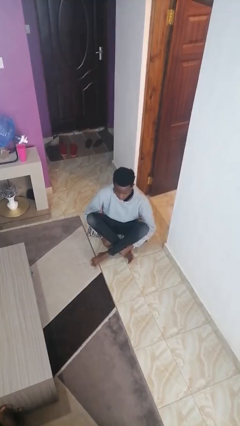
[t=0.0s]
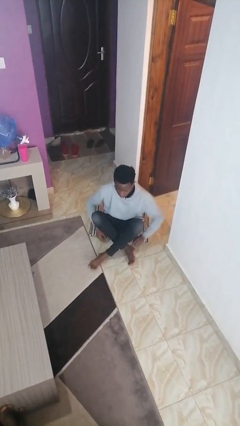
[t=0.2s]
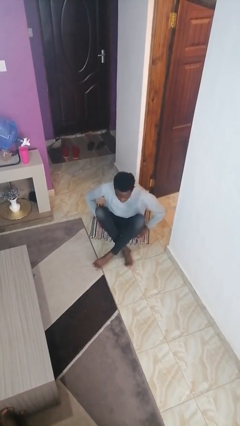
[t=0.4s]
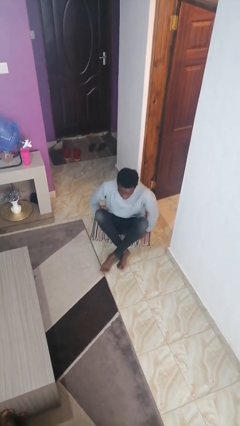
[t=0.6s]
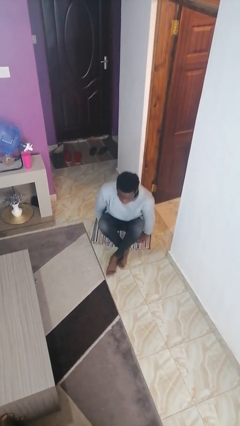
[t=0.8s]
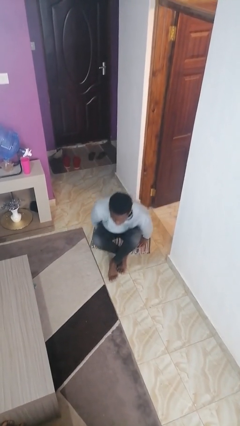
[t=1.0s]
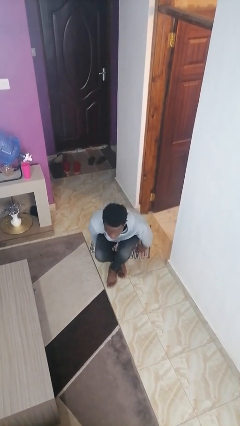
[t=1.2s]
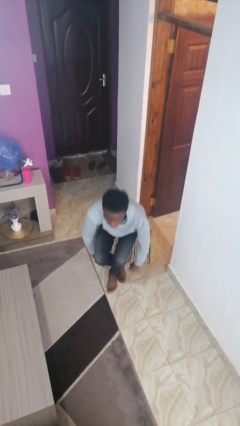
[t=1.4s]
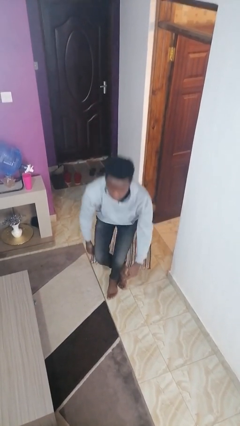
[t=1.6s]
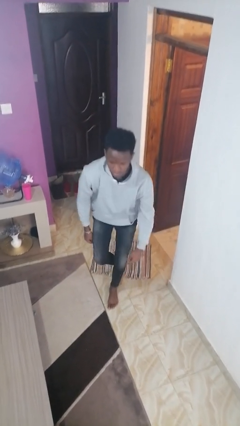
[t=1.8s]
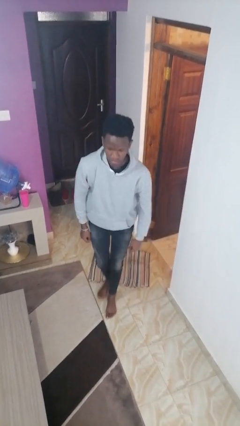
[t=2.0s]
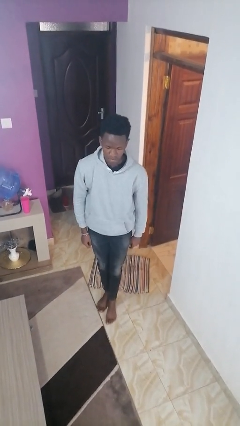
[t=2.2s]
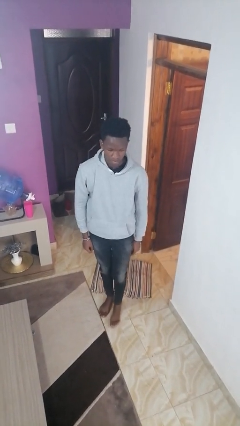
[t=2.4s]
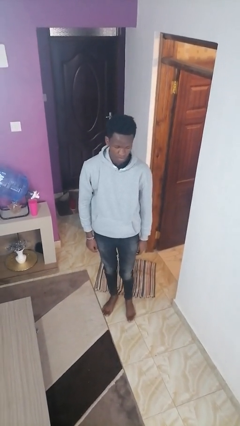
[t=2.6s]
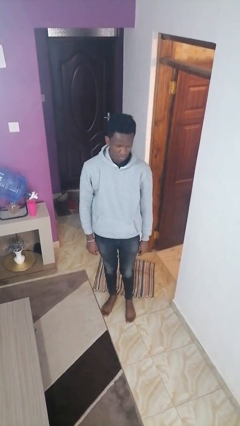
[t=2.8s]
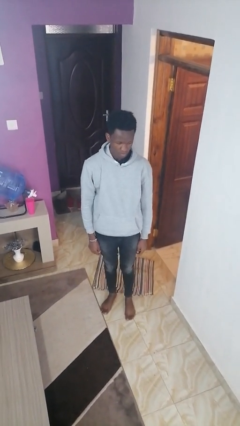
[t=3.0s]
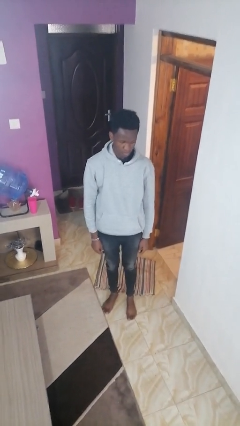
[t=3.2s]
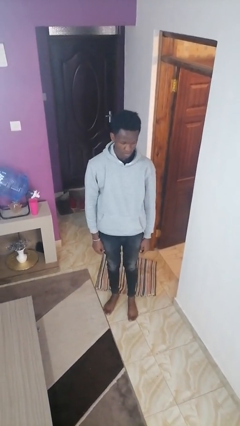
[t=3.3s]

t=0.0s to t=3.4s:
person stands up from floor

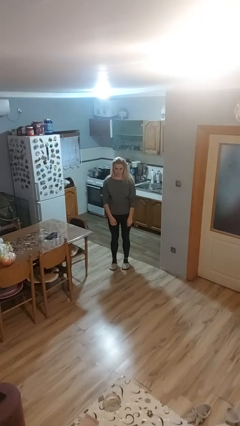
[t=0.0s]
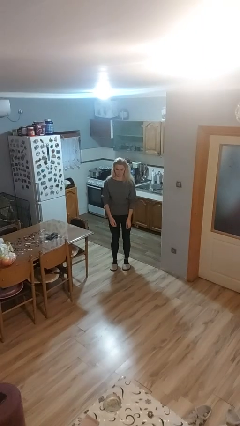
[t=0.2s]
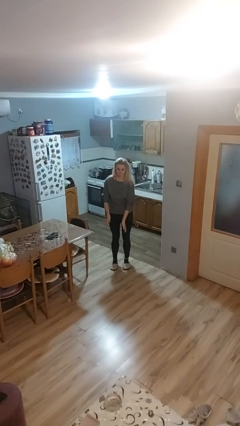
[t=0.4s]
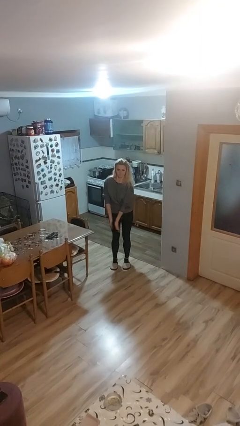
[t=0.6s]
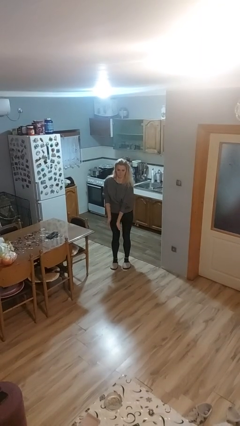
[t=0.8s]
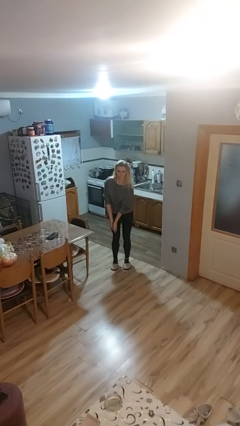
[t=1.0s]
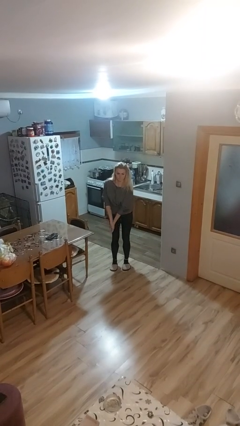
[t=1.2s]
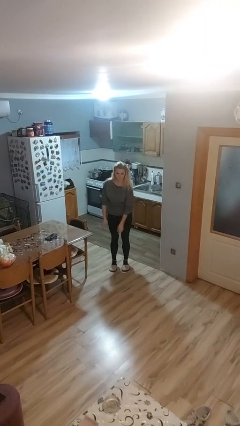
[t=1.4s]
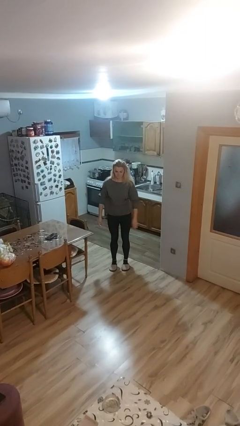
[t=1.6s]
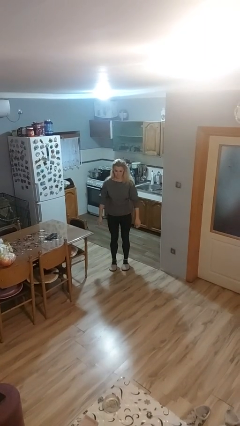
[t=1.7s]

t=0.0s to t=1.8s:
person claps hands

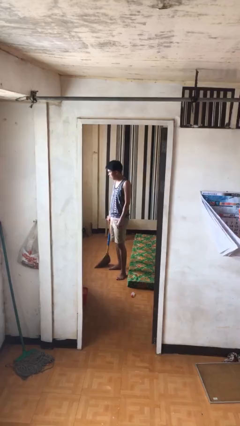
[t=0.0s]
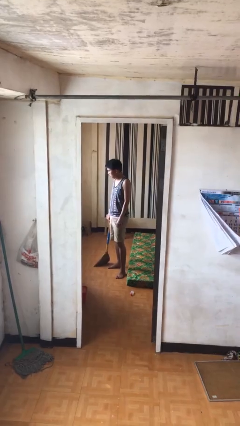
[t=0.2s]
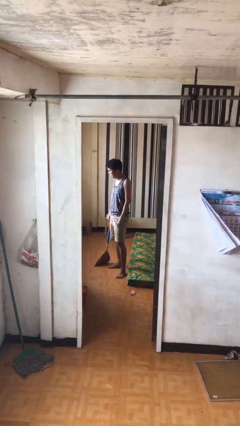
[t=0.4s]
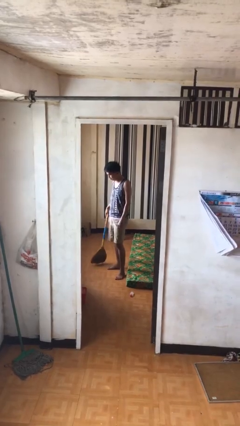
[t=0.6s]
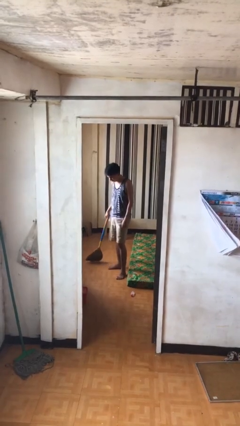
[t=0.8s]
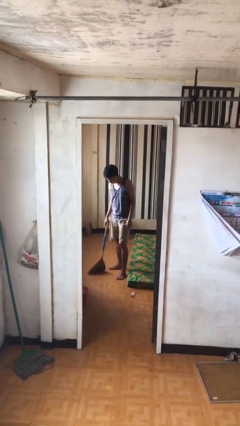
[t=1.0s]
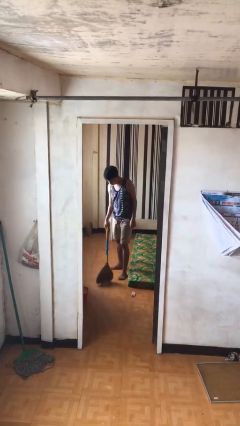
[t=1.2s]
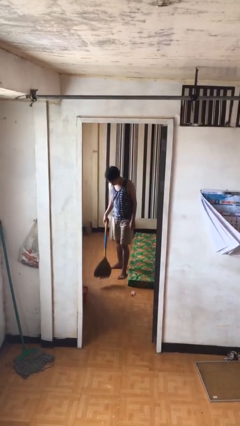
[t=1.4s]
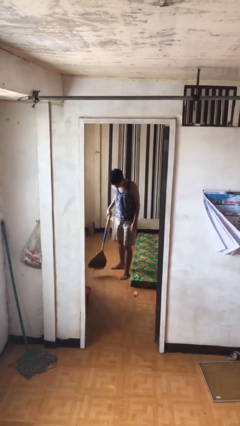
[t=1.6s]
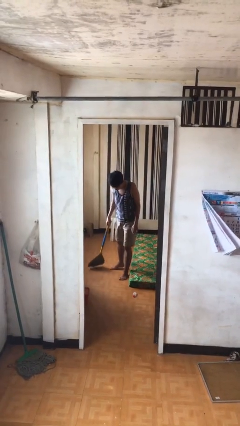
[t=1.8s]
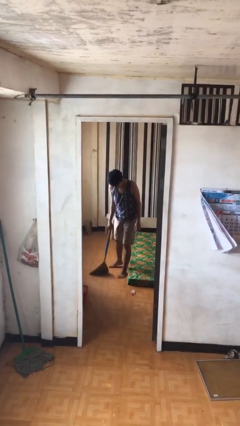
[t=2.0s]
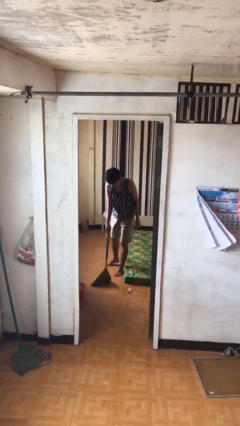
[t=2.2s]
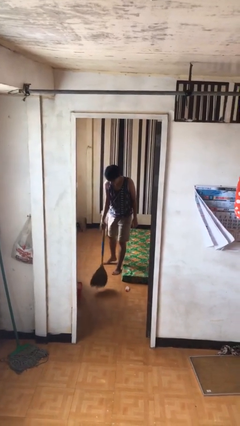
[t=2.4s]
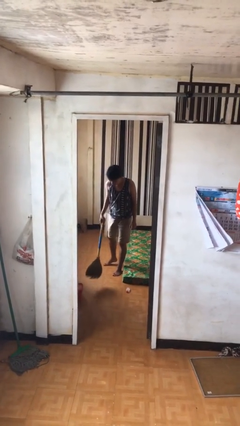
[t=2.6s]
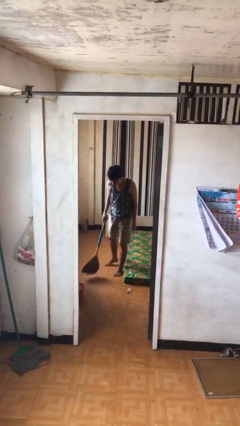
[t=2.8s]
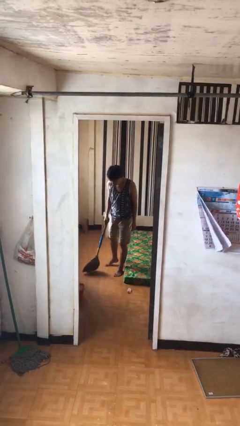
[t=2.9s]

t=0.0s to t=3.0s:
person sweeps floor

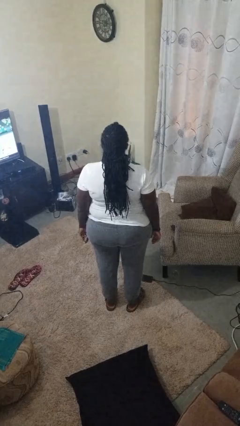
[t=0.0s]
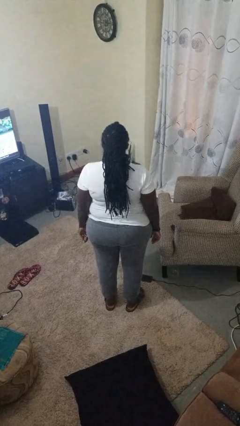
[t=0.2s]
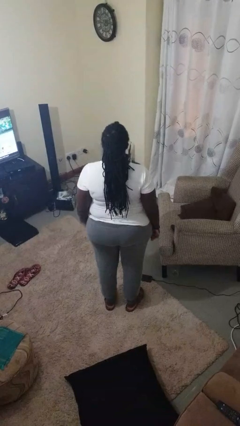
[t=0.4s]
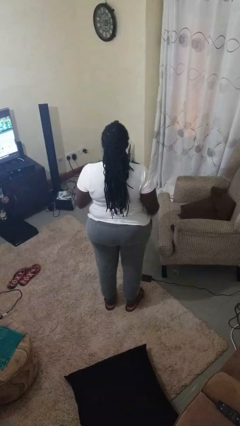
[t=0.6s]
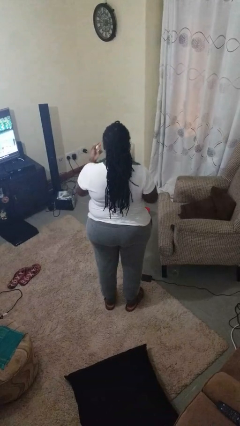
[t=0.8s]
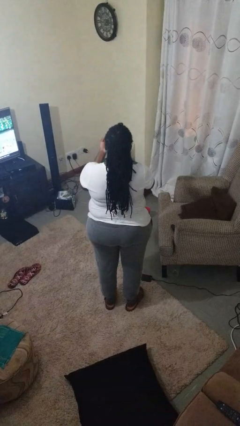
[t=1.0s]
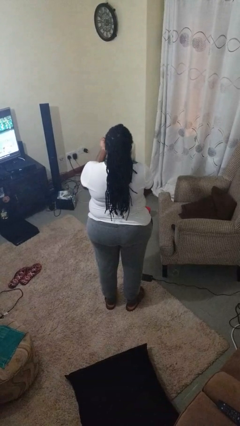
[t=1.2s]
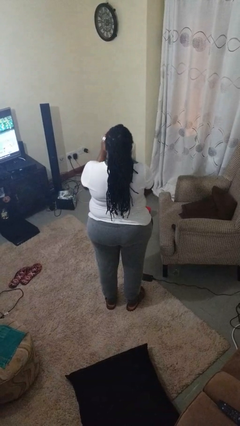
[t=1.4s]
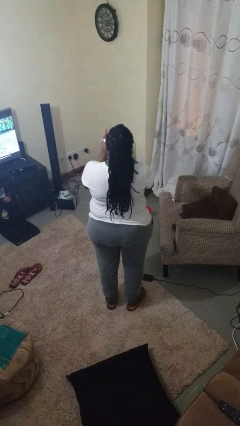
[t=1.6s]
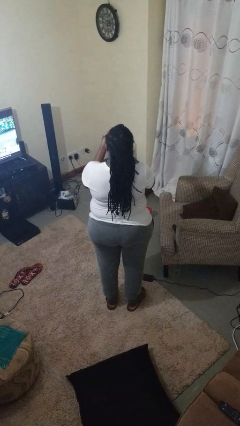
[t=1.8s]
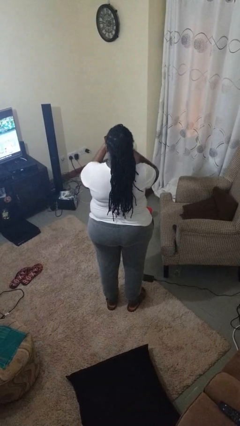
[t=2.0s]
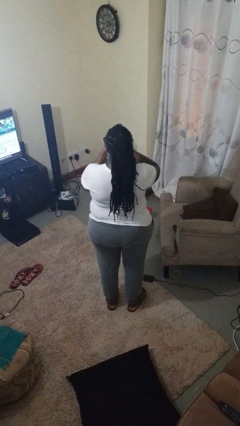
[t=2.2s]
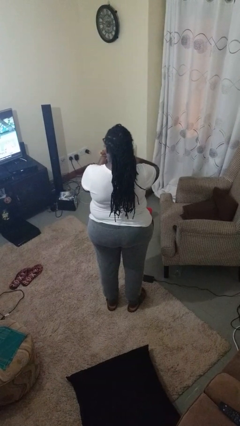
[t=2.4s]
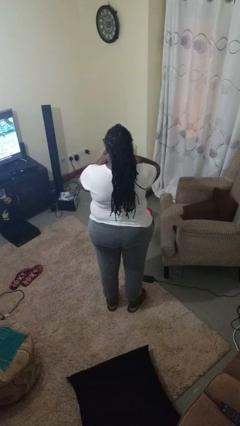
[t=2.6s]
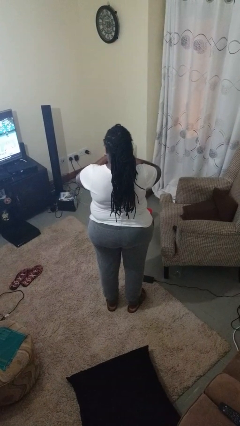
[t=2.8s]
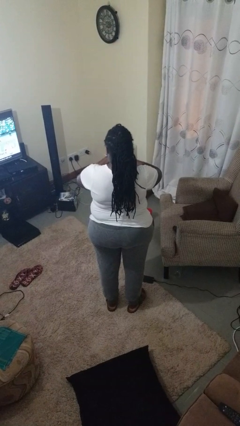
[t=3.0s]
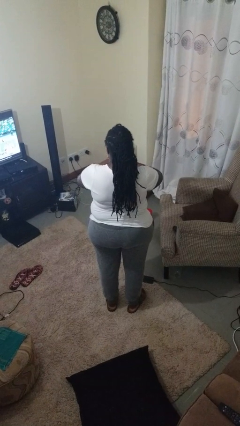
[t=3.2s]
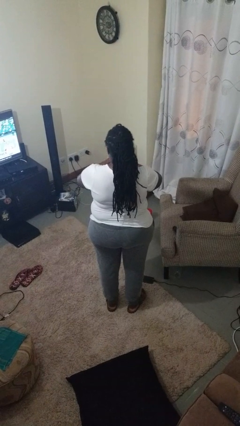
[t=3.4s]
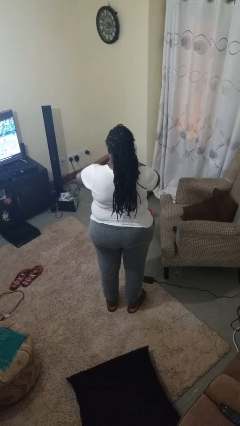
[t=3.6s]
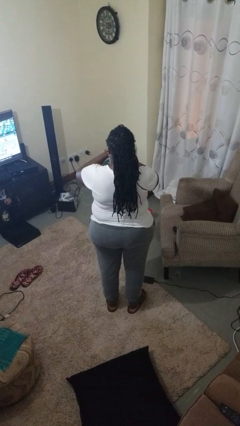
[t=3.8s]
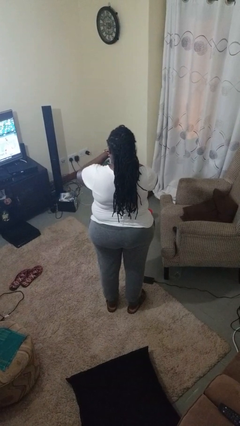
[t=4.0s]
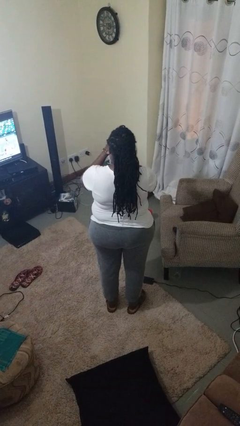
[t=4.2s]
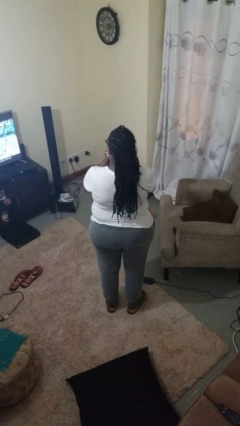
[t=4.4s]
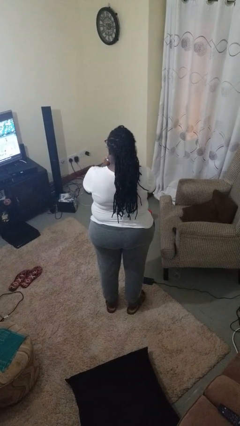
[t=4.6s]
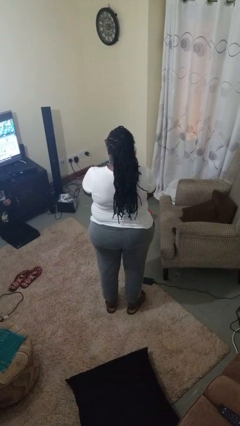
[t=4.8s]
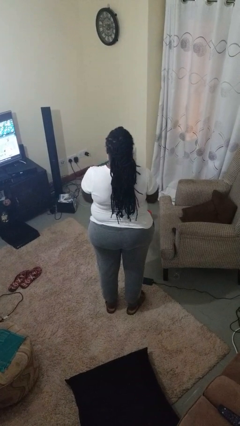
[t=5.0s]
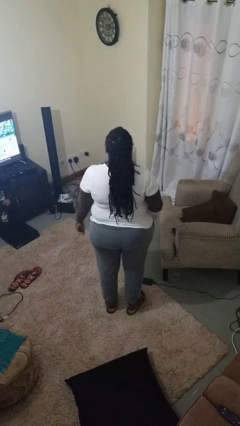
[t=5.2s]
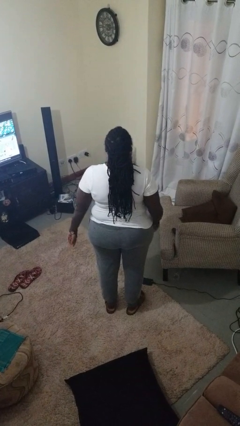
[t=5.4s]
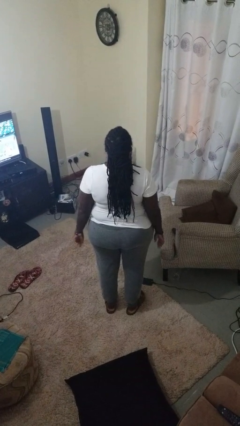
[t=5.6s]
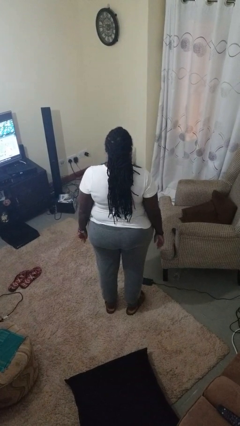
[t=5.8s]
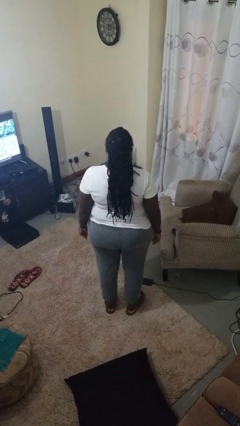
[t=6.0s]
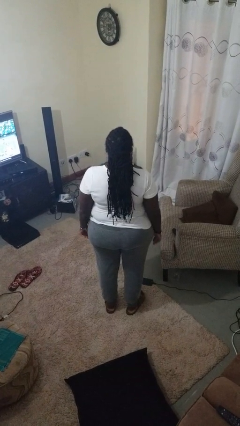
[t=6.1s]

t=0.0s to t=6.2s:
person puts on wristwatch

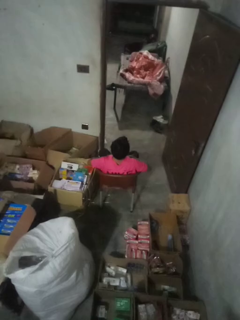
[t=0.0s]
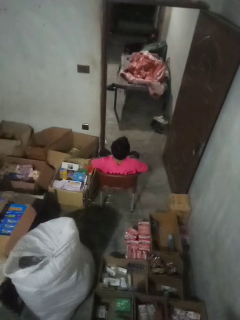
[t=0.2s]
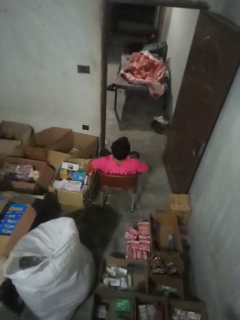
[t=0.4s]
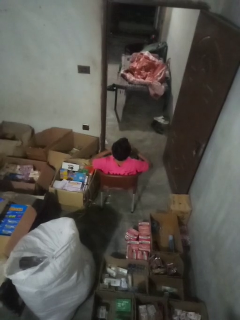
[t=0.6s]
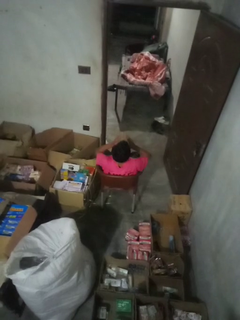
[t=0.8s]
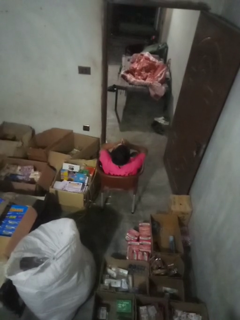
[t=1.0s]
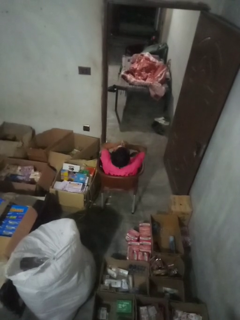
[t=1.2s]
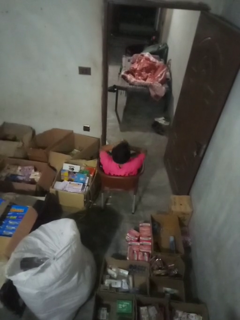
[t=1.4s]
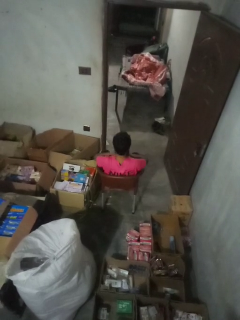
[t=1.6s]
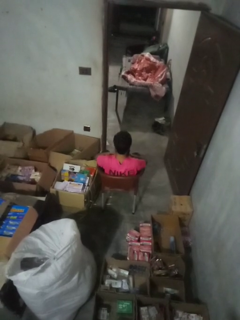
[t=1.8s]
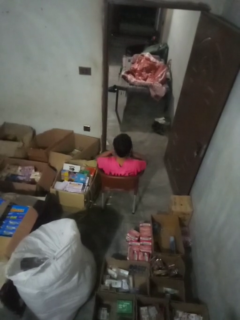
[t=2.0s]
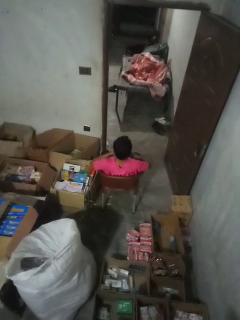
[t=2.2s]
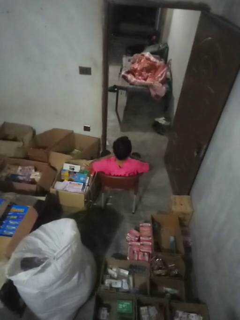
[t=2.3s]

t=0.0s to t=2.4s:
person sneezes into hand

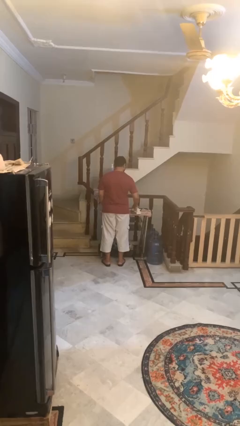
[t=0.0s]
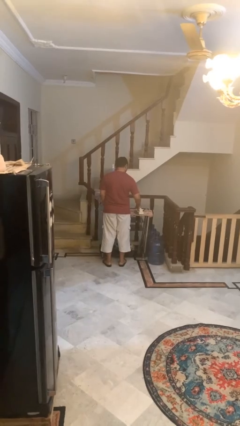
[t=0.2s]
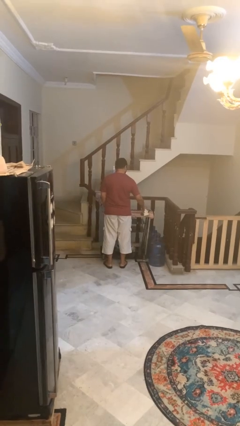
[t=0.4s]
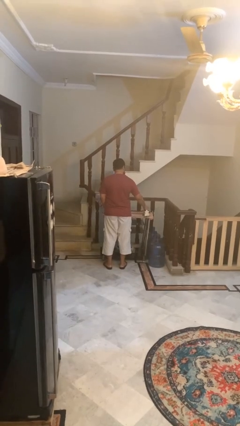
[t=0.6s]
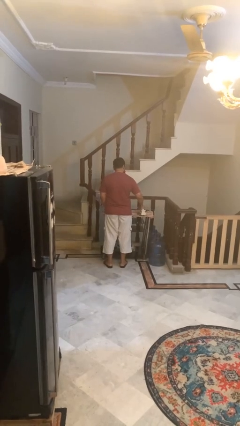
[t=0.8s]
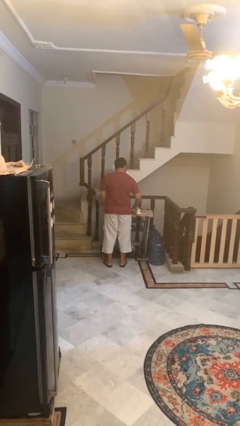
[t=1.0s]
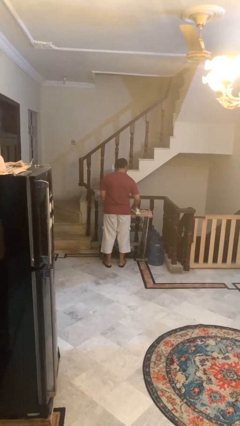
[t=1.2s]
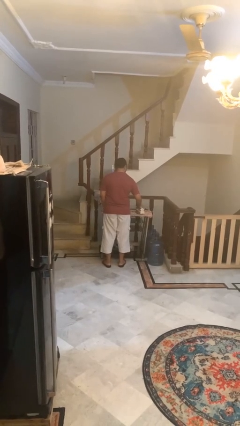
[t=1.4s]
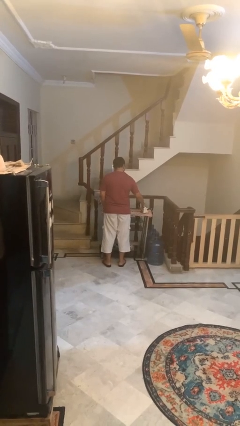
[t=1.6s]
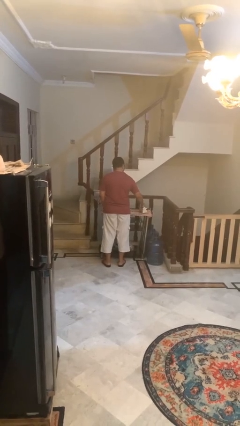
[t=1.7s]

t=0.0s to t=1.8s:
person irons clothes
